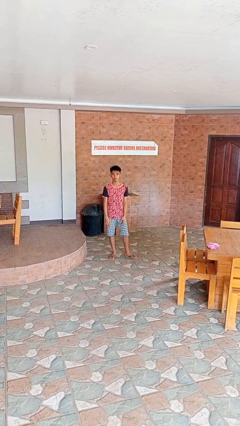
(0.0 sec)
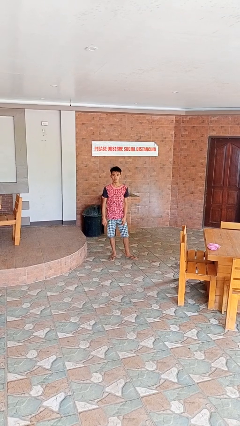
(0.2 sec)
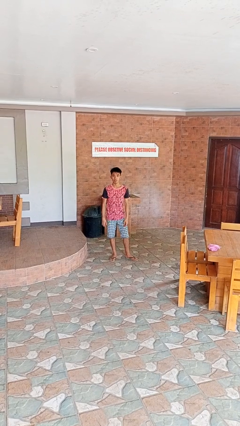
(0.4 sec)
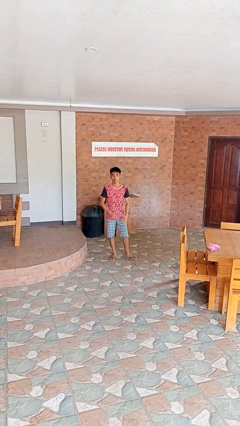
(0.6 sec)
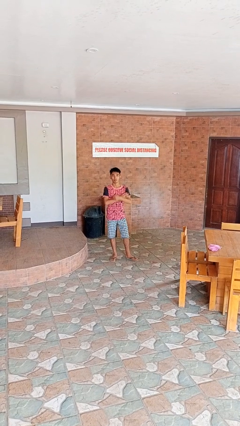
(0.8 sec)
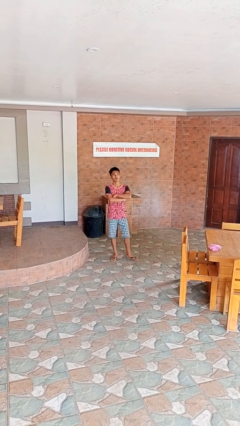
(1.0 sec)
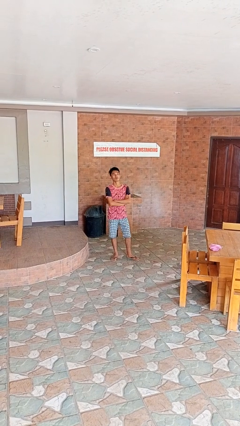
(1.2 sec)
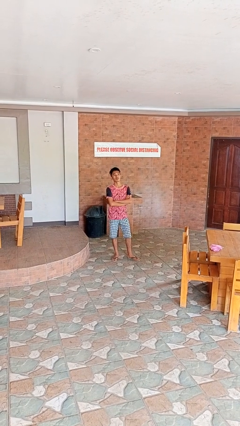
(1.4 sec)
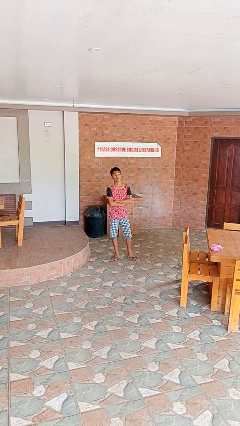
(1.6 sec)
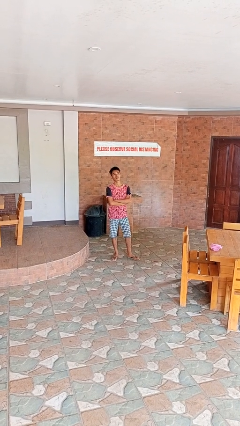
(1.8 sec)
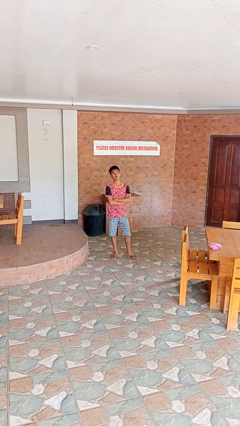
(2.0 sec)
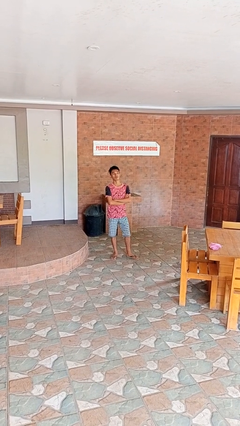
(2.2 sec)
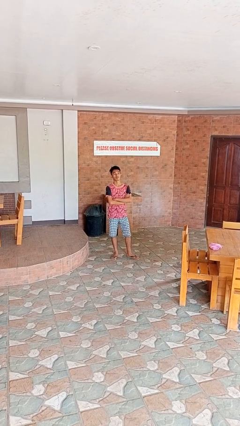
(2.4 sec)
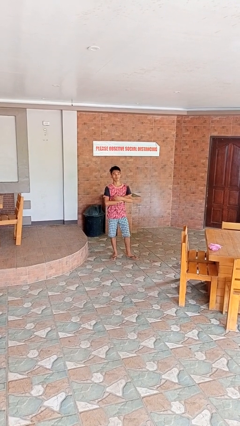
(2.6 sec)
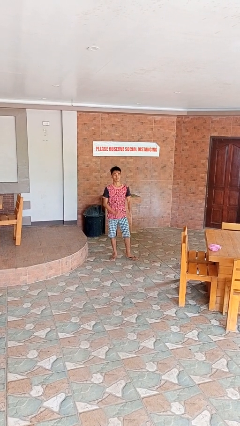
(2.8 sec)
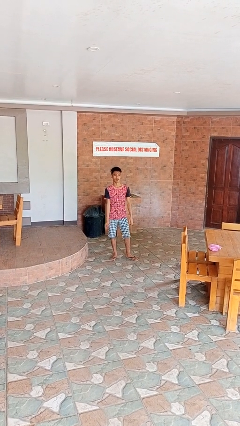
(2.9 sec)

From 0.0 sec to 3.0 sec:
person crosses arms

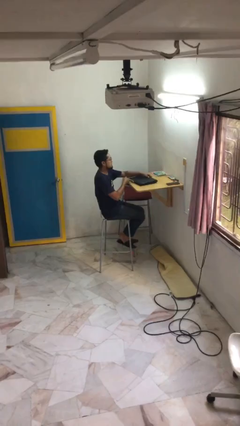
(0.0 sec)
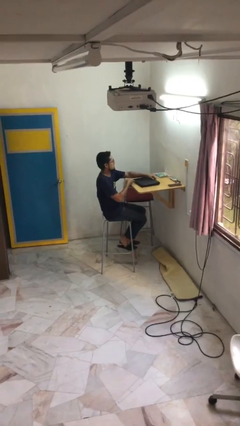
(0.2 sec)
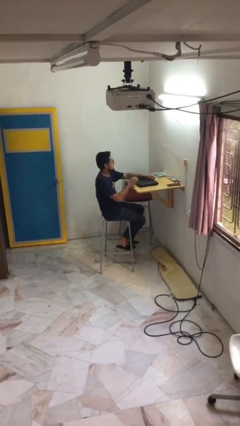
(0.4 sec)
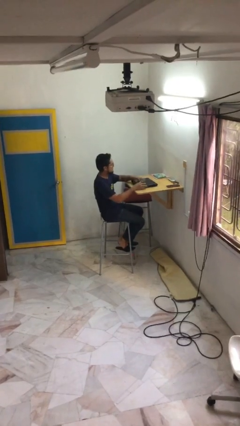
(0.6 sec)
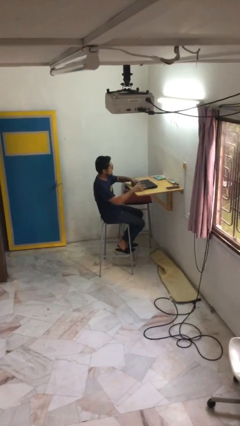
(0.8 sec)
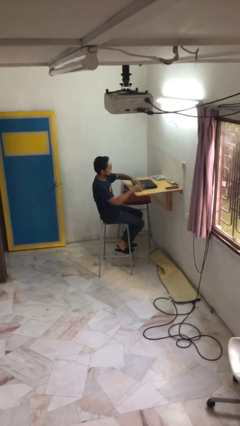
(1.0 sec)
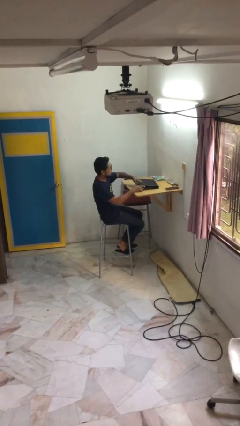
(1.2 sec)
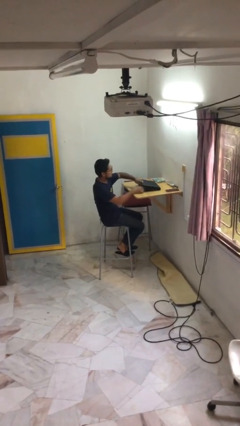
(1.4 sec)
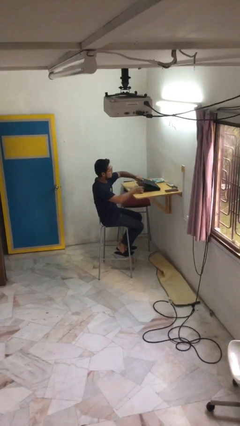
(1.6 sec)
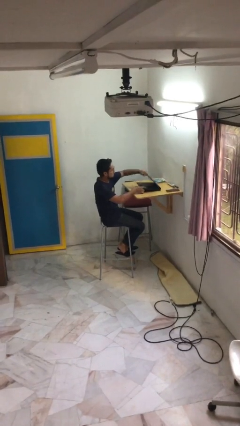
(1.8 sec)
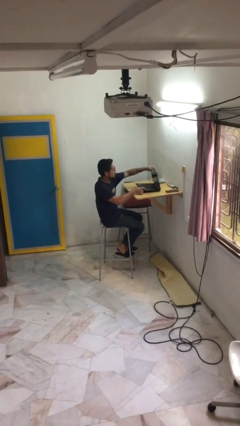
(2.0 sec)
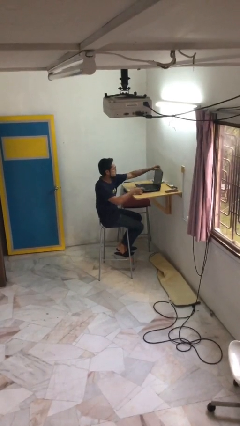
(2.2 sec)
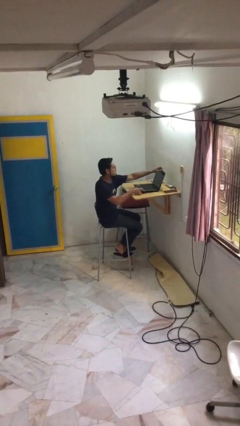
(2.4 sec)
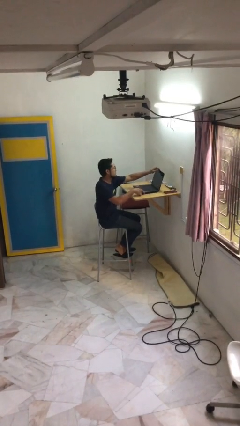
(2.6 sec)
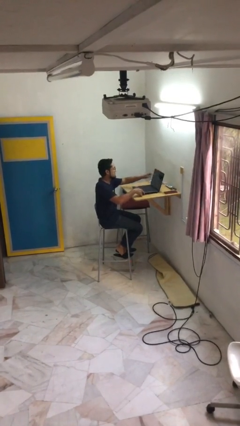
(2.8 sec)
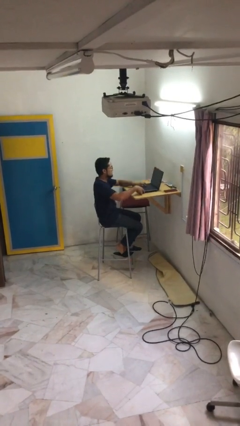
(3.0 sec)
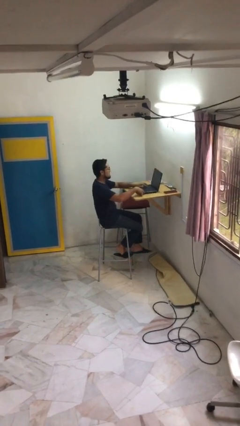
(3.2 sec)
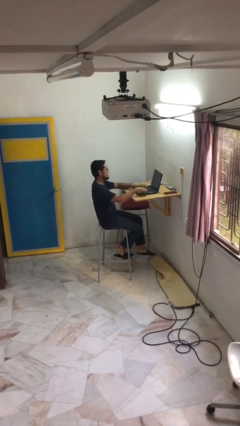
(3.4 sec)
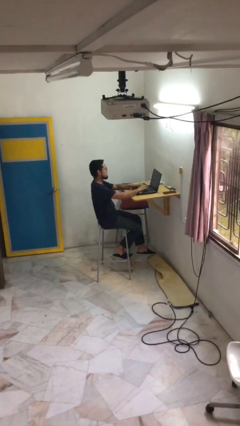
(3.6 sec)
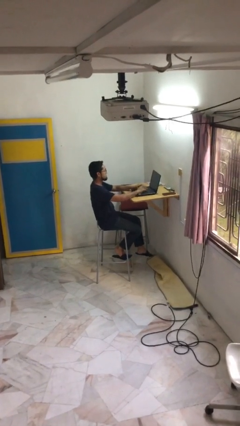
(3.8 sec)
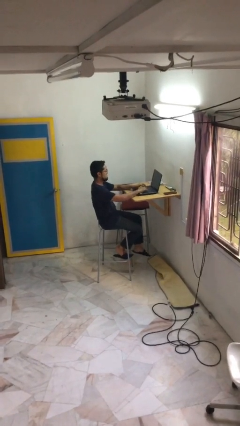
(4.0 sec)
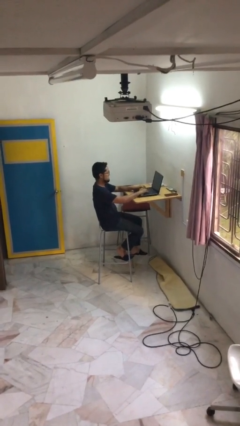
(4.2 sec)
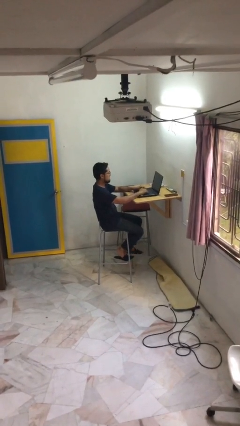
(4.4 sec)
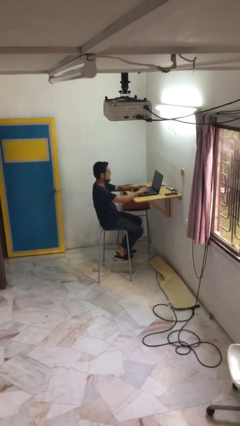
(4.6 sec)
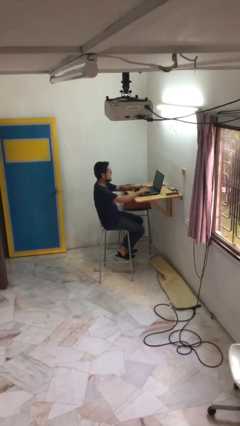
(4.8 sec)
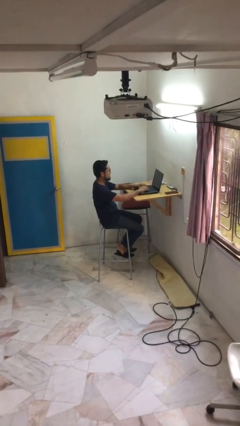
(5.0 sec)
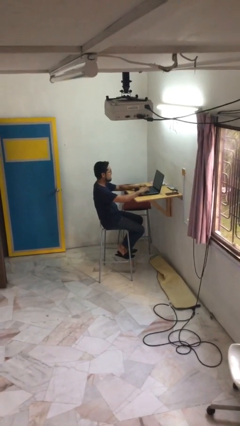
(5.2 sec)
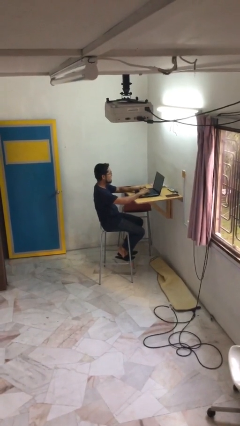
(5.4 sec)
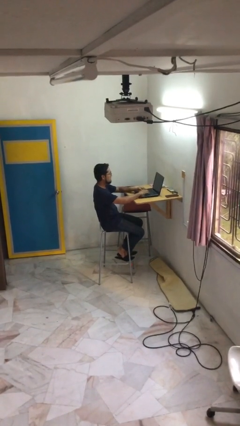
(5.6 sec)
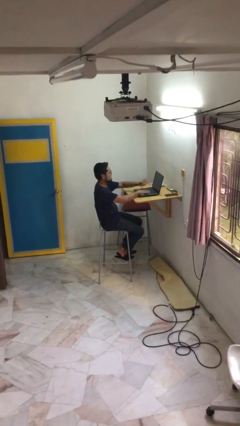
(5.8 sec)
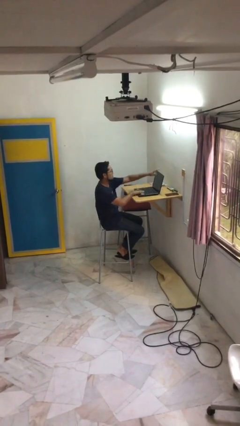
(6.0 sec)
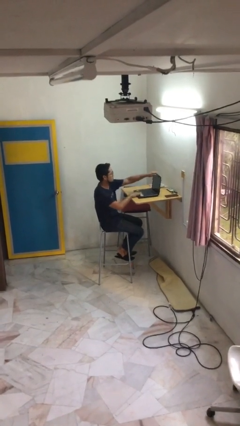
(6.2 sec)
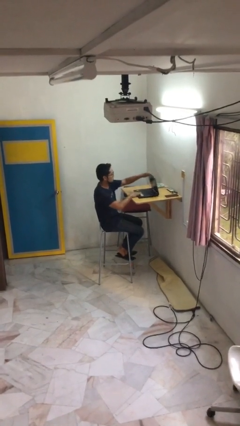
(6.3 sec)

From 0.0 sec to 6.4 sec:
person interacts with laptop

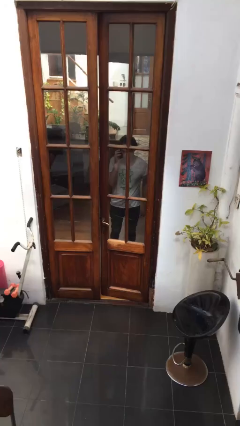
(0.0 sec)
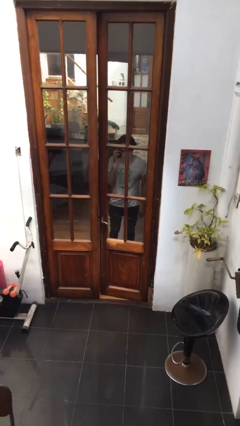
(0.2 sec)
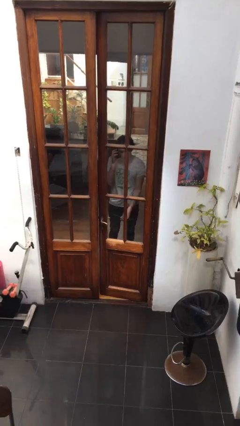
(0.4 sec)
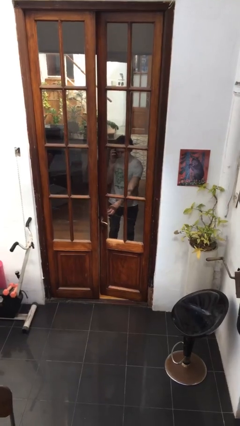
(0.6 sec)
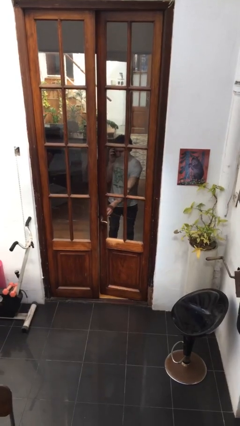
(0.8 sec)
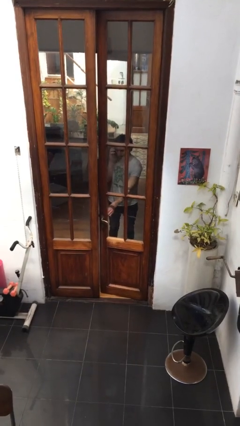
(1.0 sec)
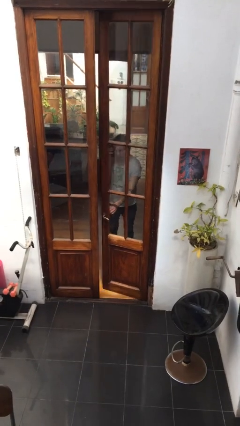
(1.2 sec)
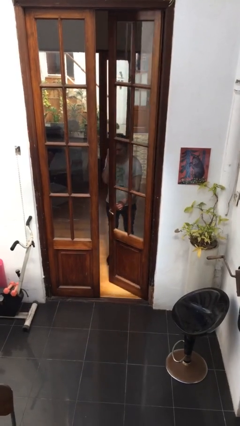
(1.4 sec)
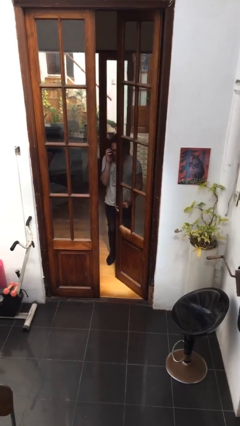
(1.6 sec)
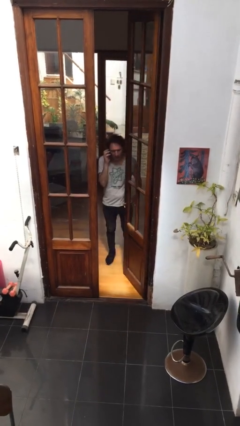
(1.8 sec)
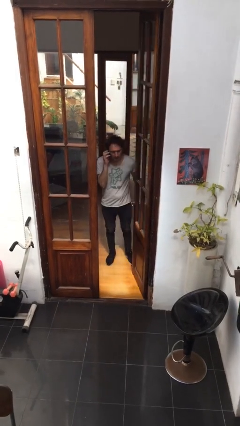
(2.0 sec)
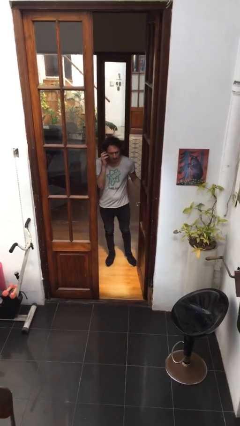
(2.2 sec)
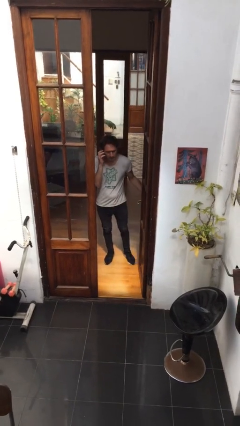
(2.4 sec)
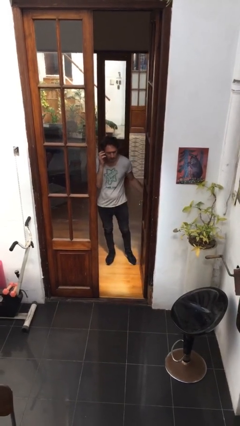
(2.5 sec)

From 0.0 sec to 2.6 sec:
person opens facility door

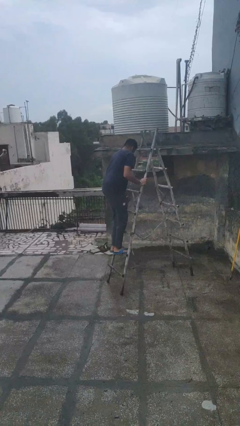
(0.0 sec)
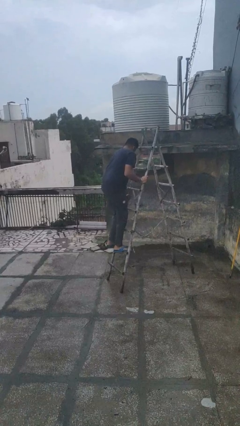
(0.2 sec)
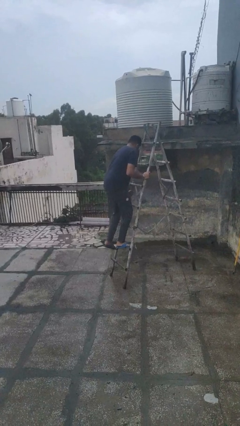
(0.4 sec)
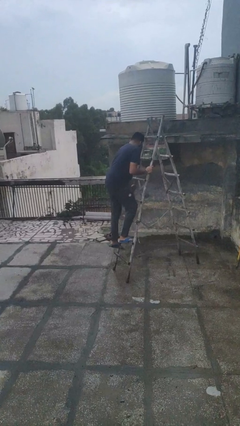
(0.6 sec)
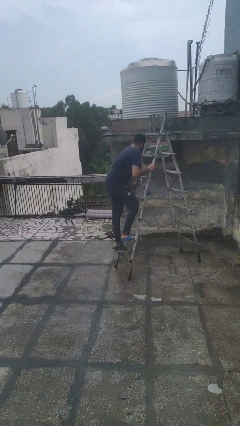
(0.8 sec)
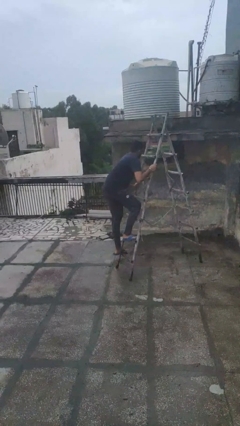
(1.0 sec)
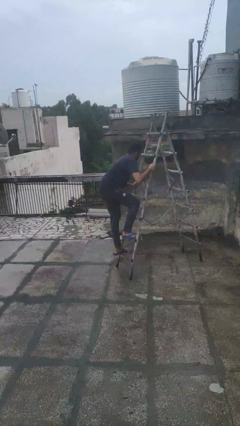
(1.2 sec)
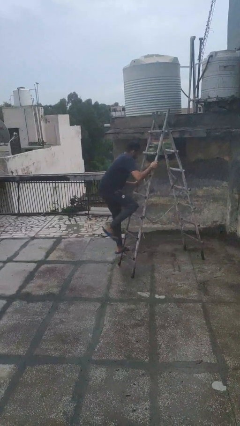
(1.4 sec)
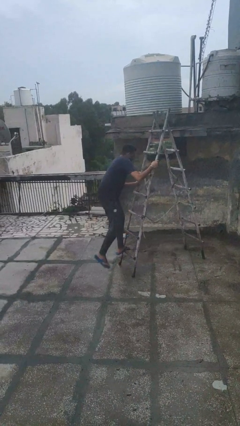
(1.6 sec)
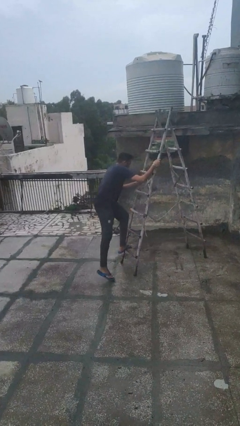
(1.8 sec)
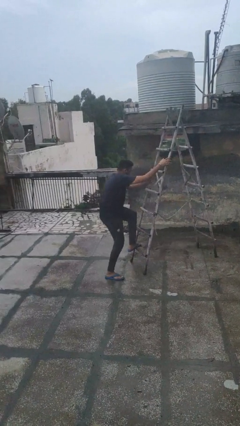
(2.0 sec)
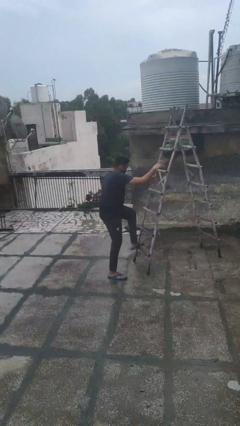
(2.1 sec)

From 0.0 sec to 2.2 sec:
person climbs down ladder

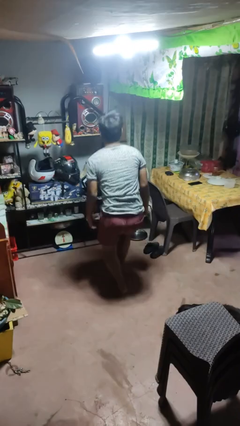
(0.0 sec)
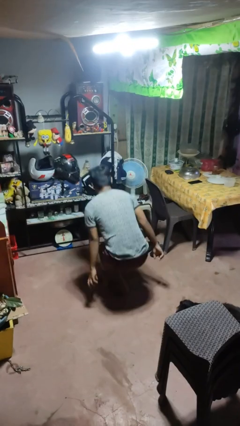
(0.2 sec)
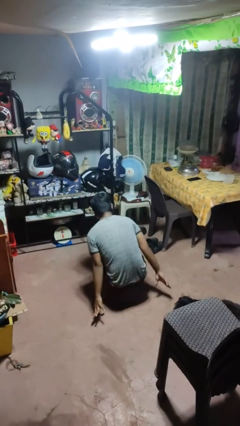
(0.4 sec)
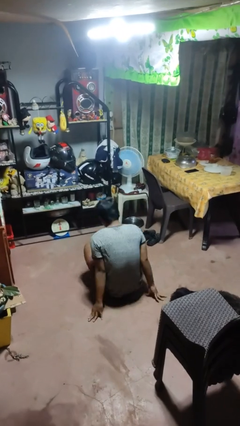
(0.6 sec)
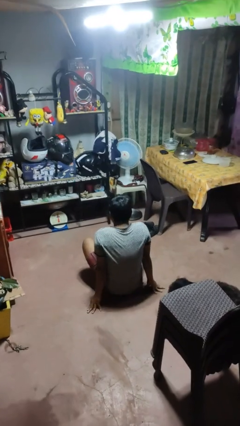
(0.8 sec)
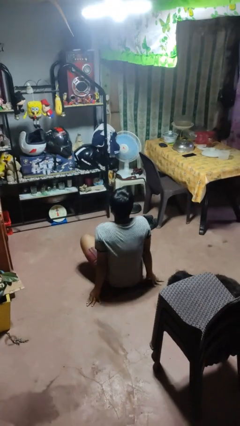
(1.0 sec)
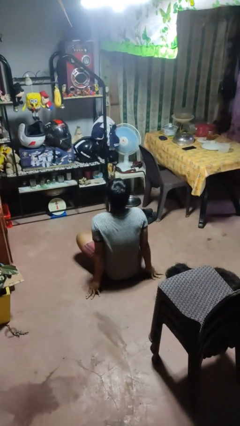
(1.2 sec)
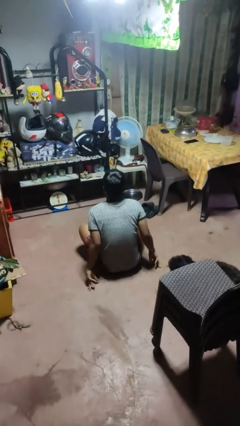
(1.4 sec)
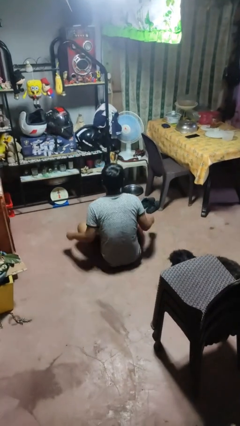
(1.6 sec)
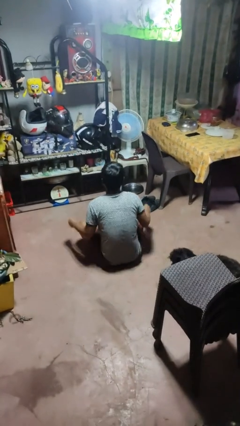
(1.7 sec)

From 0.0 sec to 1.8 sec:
person sits crisscross

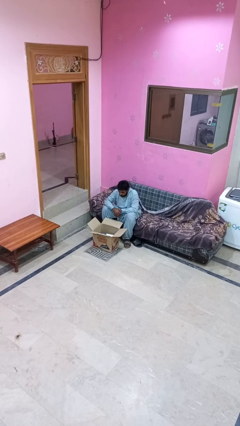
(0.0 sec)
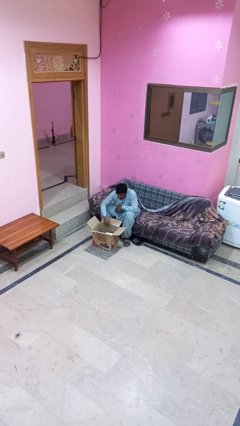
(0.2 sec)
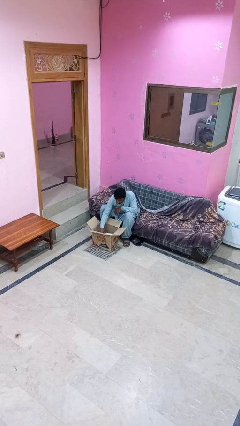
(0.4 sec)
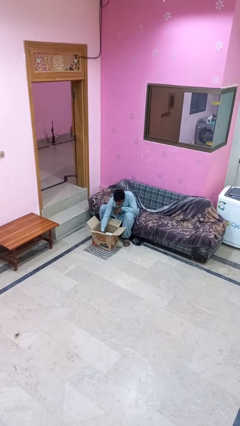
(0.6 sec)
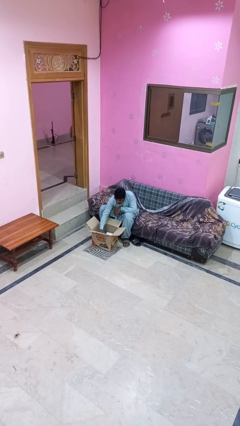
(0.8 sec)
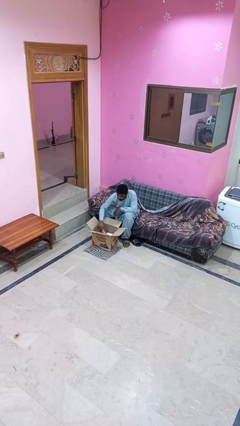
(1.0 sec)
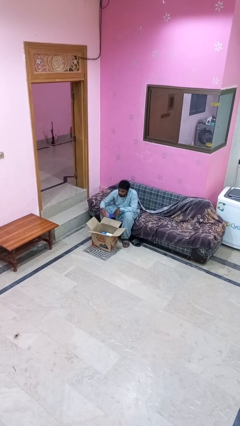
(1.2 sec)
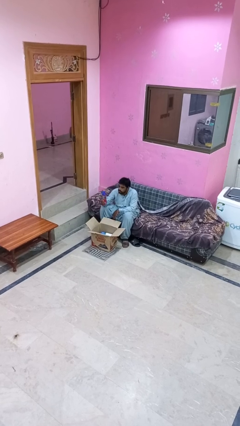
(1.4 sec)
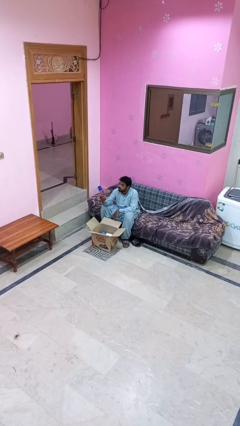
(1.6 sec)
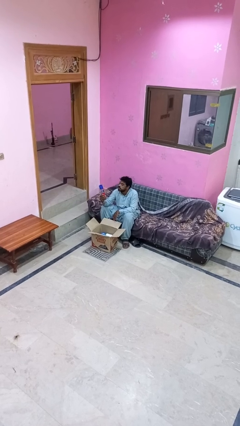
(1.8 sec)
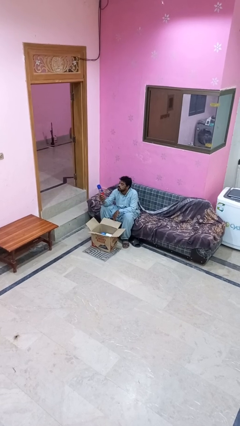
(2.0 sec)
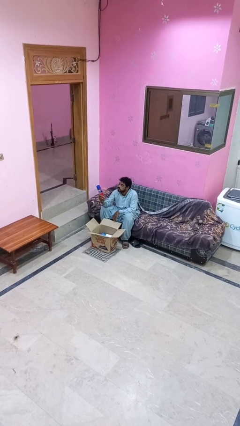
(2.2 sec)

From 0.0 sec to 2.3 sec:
person takes object from box
